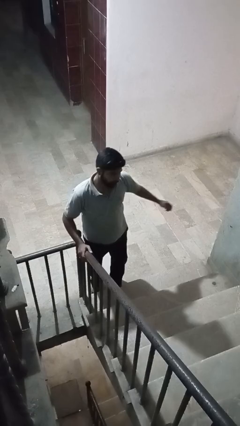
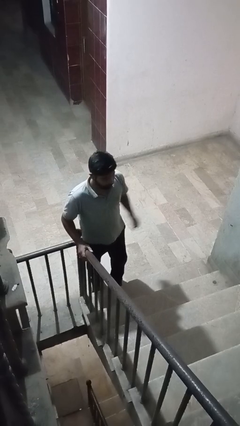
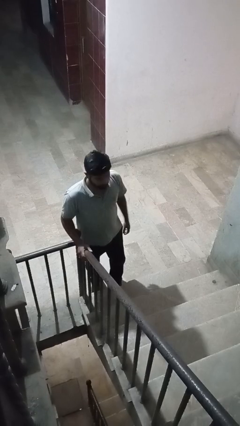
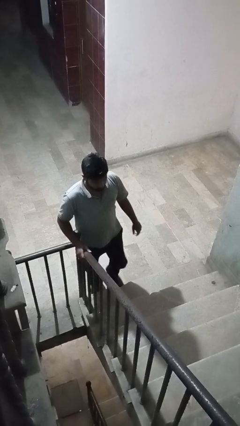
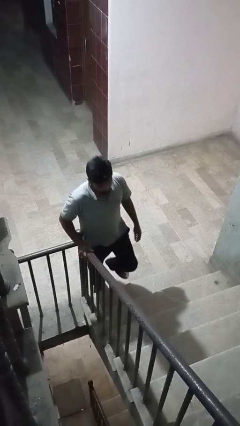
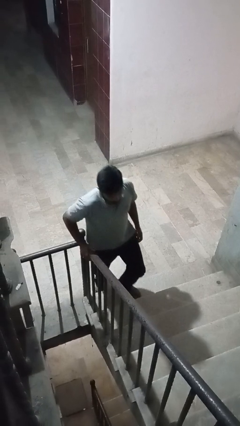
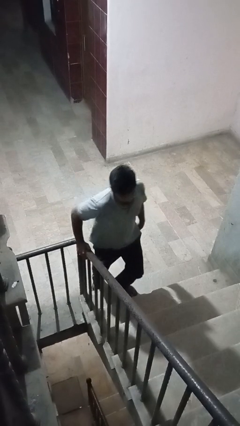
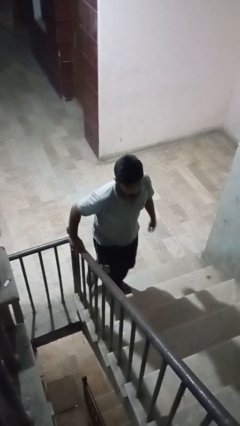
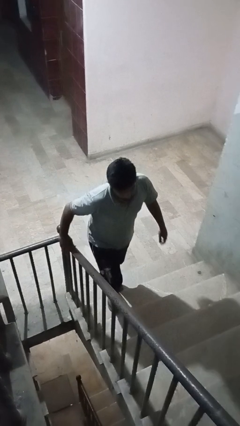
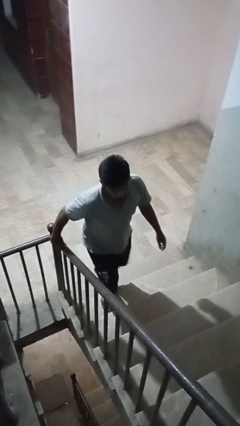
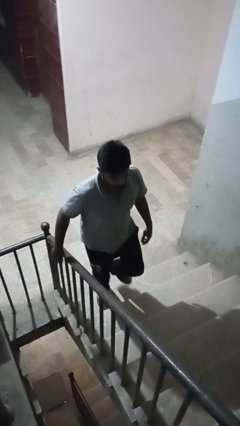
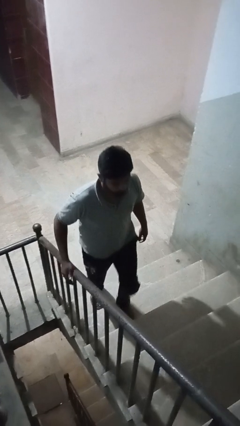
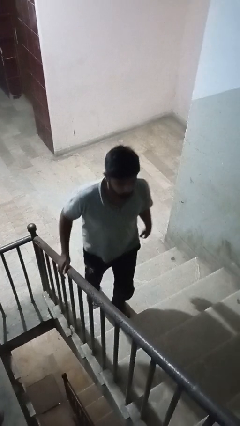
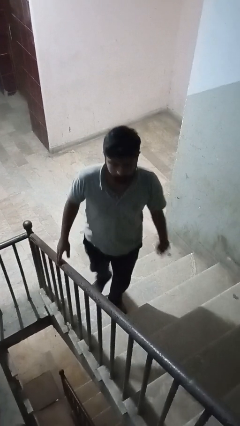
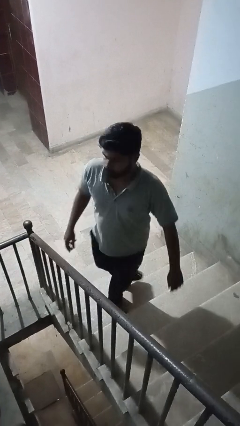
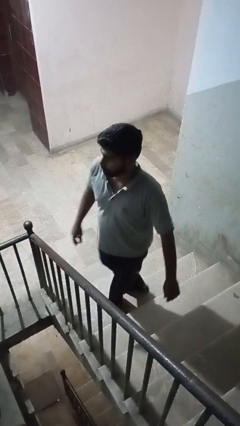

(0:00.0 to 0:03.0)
person climbs up stairs

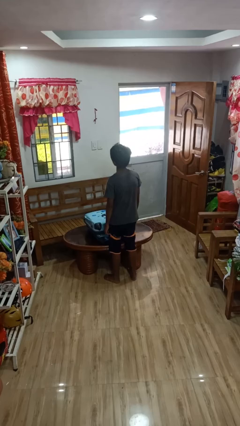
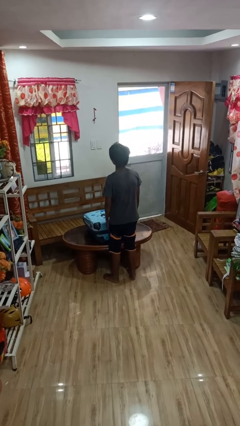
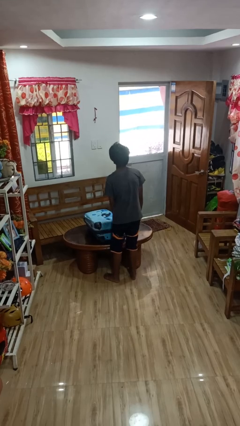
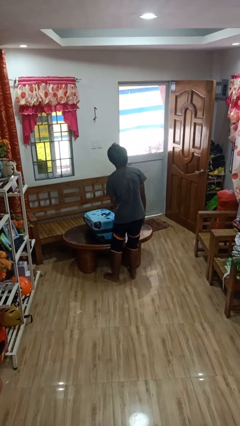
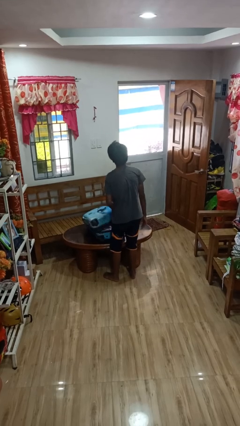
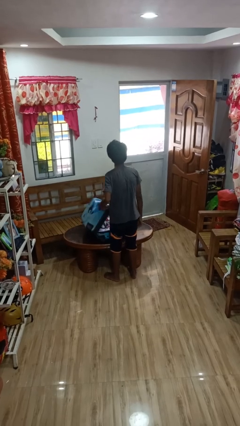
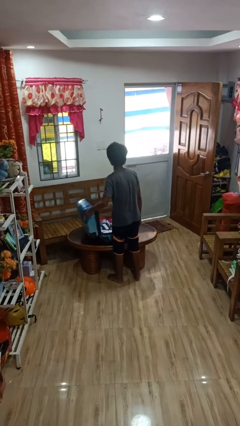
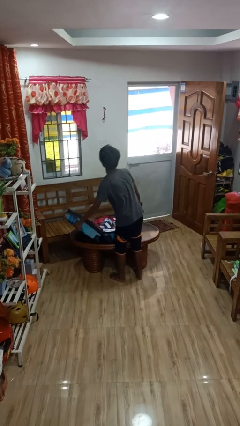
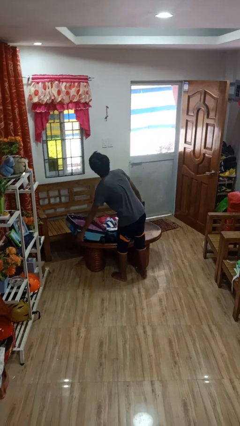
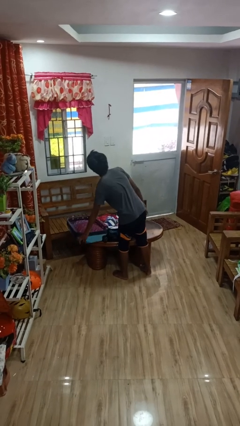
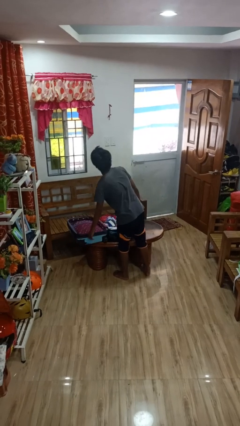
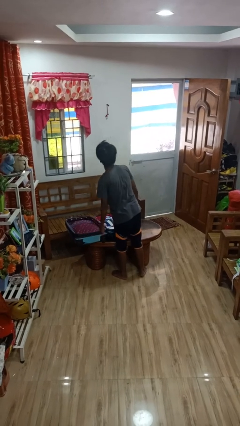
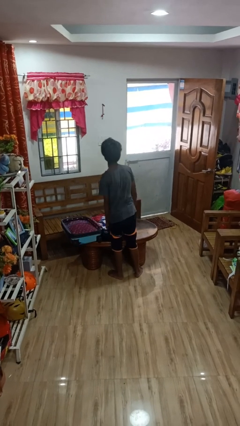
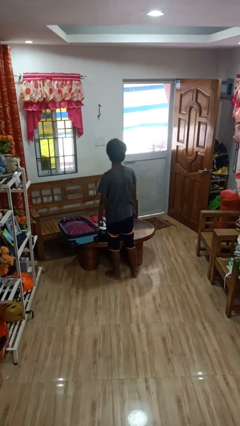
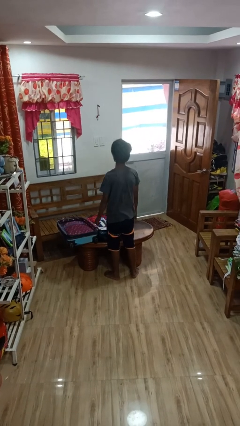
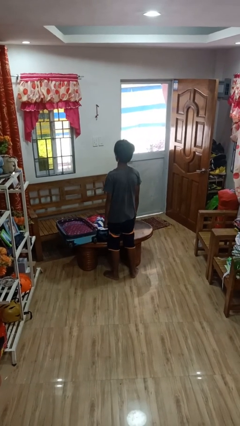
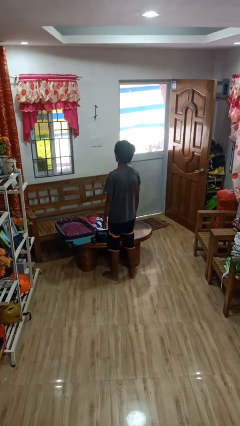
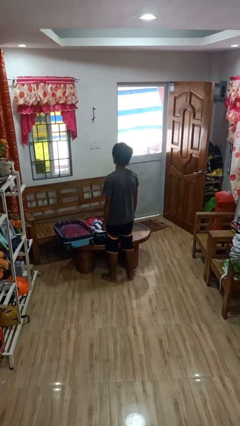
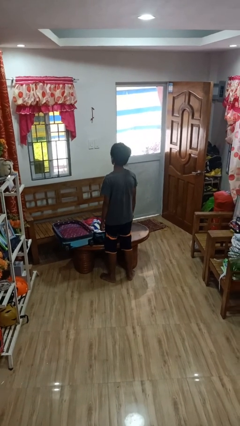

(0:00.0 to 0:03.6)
person opens suitcase

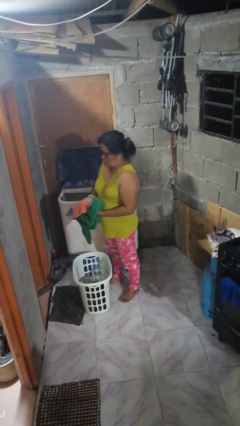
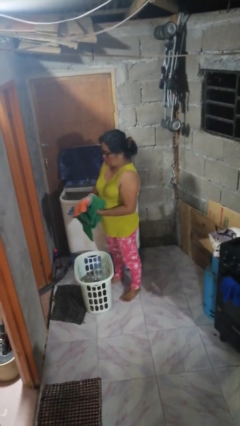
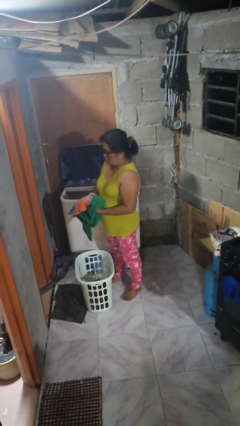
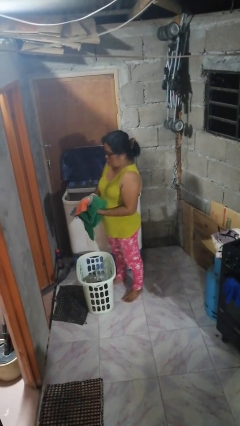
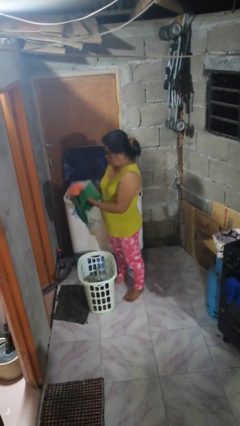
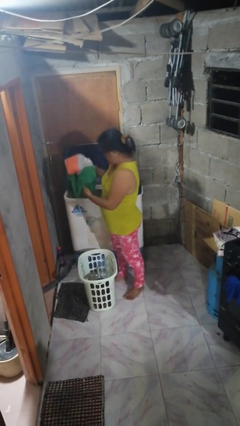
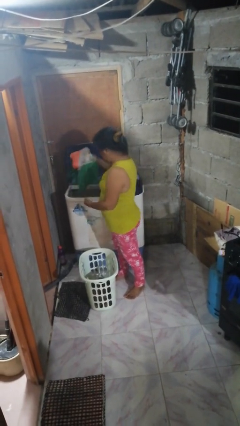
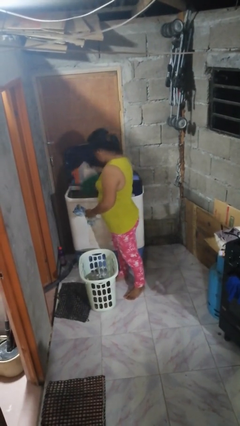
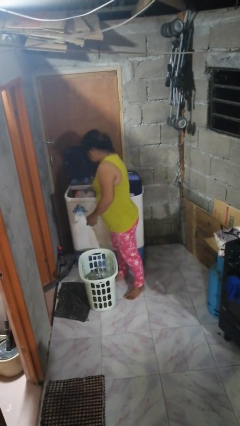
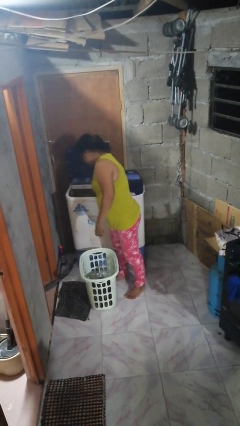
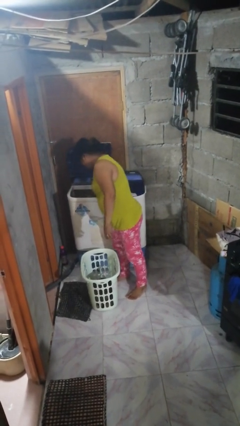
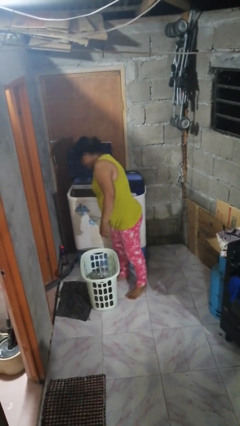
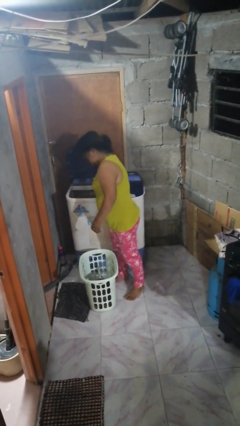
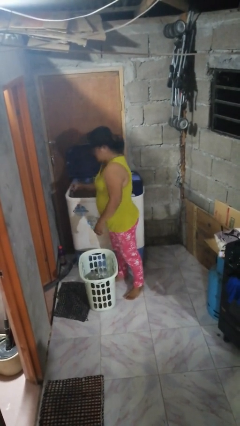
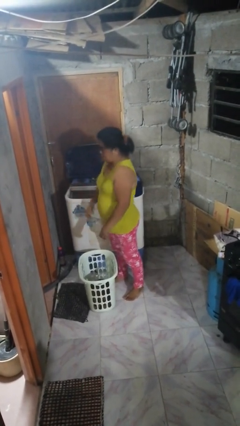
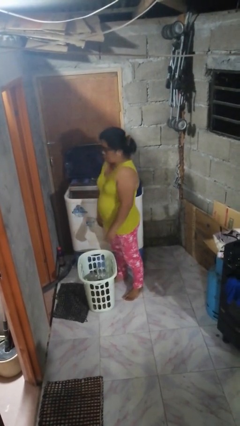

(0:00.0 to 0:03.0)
person loads clotheswasher

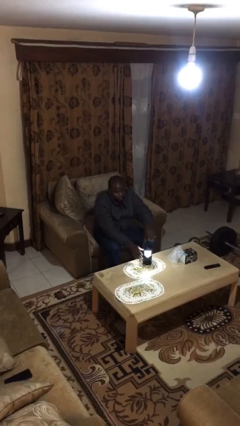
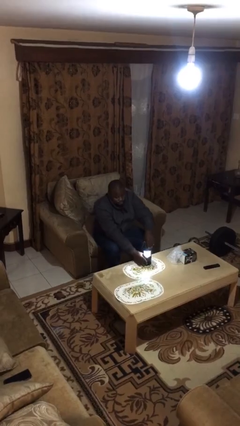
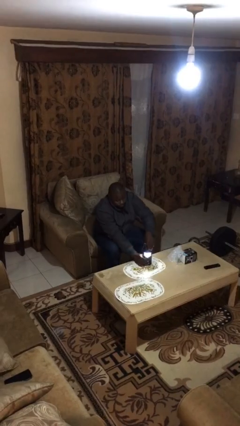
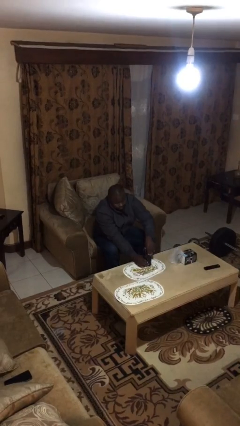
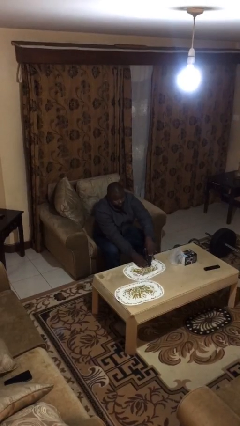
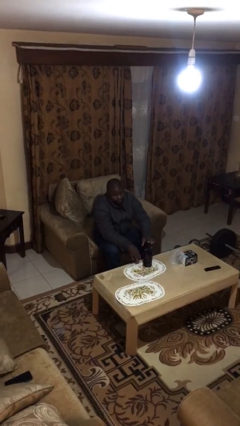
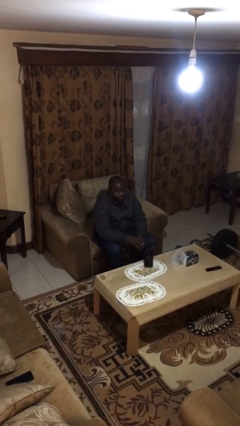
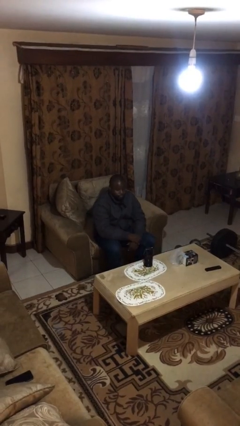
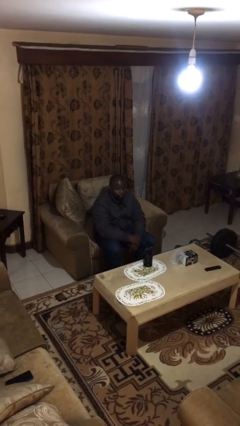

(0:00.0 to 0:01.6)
person turns off lamp

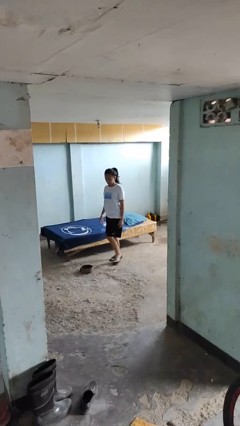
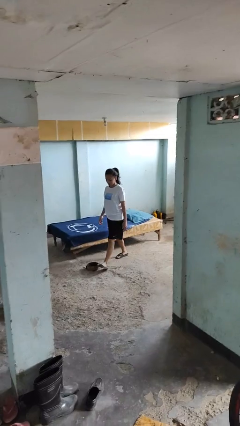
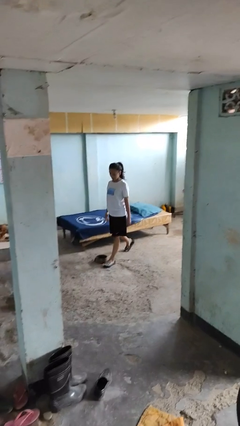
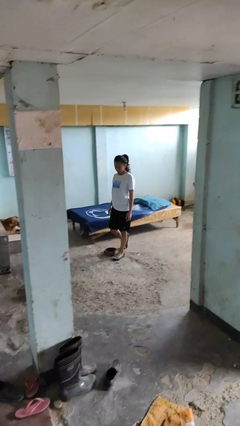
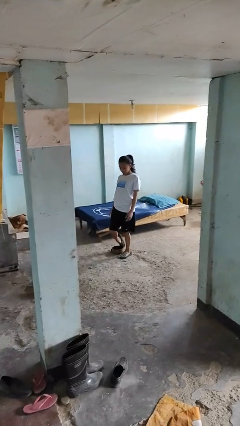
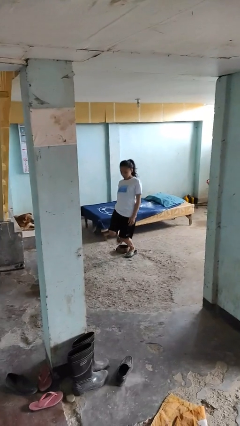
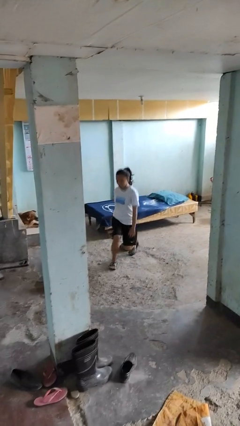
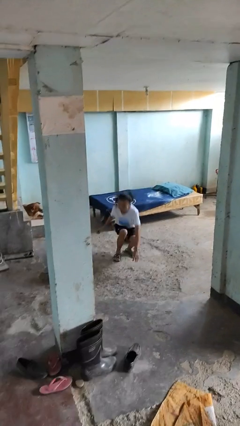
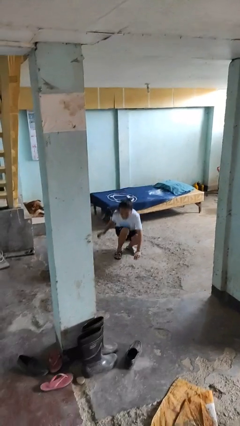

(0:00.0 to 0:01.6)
person trips on object on floor

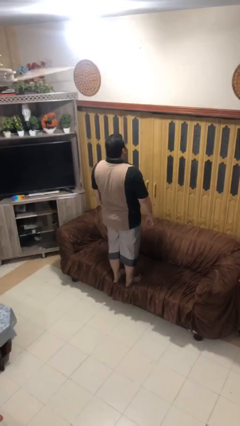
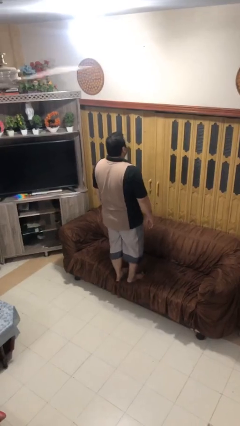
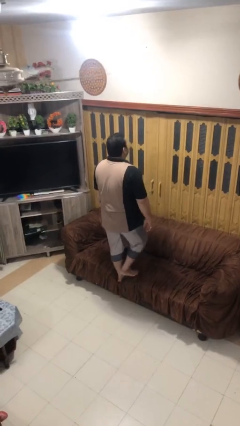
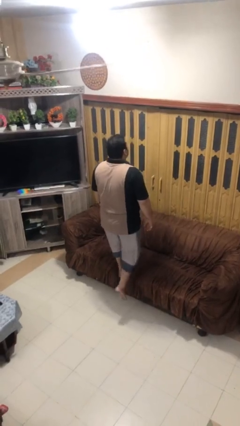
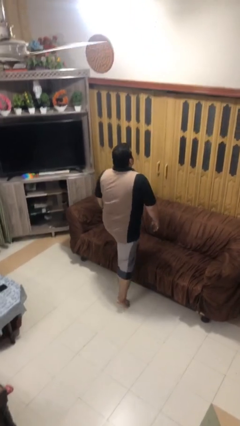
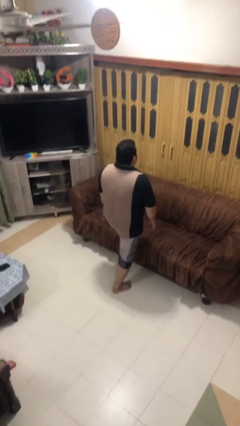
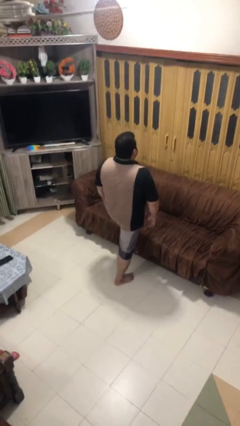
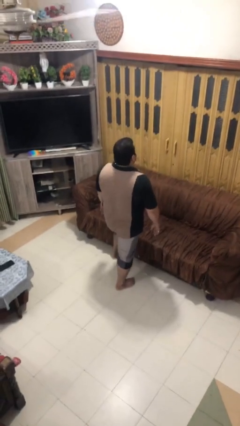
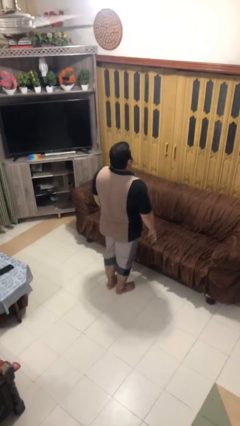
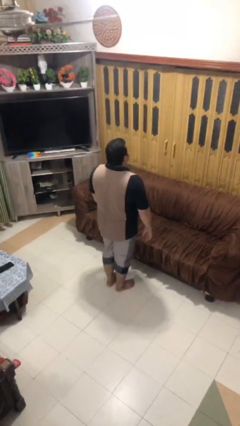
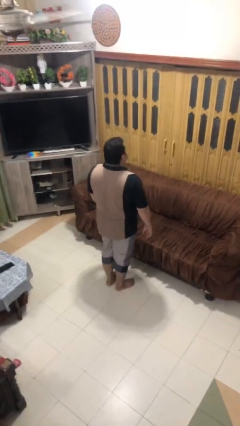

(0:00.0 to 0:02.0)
person climbs off couch

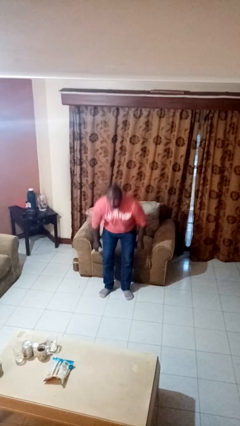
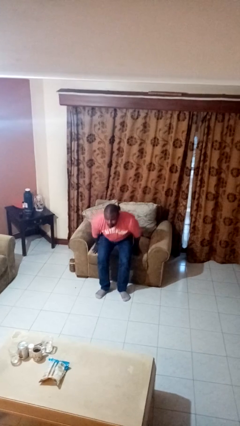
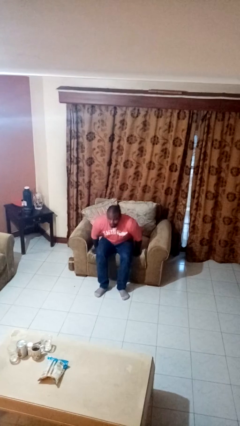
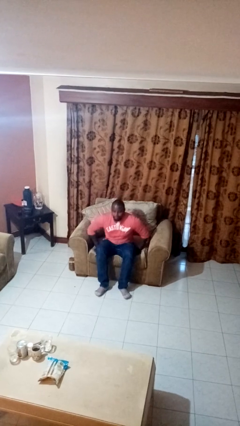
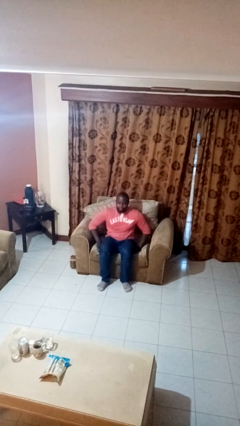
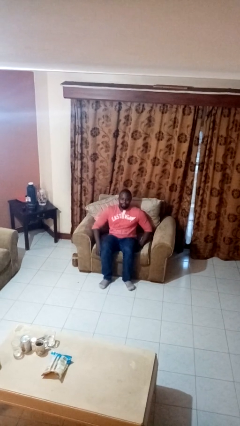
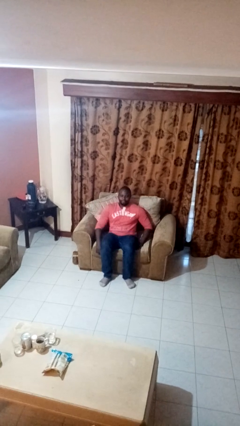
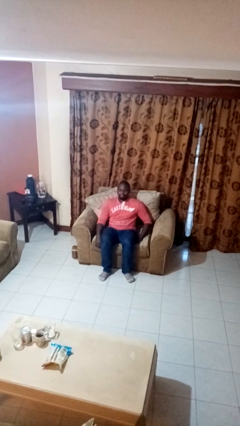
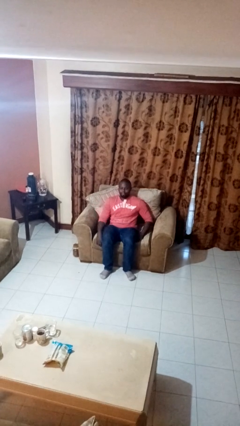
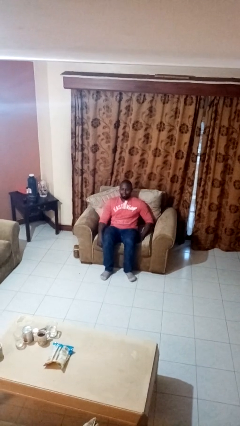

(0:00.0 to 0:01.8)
person sits down

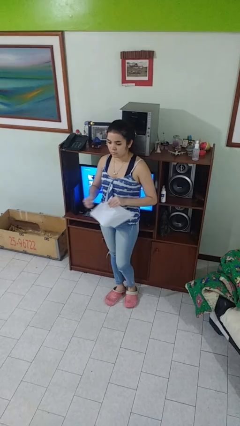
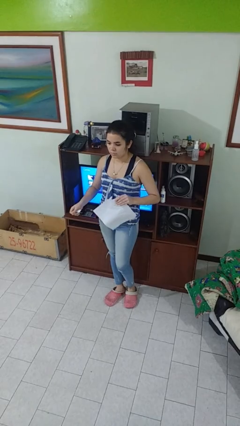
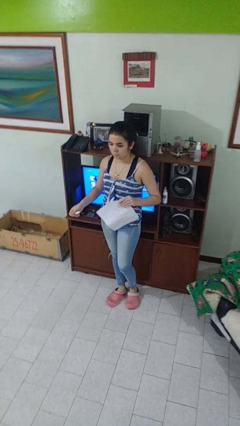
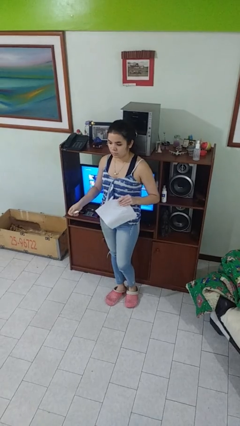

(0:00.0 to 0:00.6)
person tears paper
